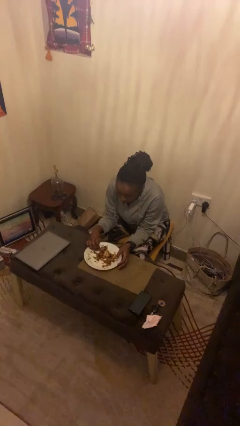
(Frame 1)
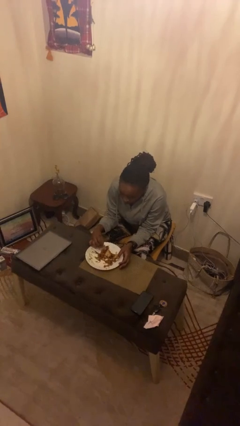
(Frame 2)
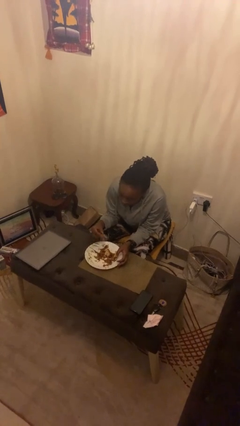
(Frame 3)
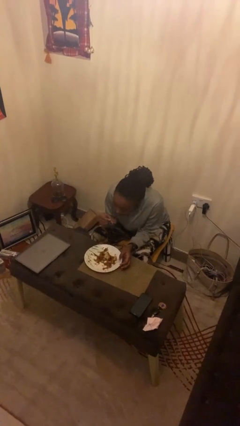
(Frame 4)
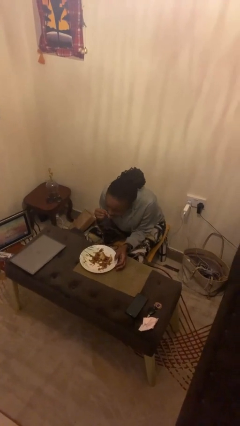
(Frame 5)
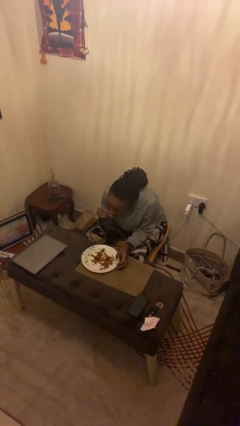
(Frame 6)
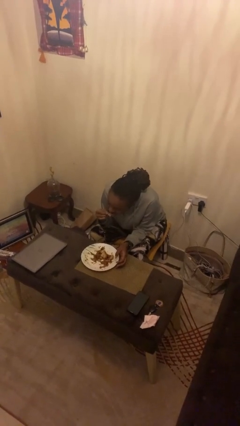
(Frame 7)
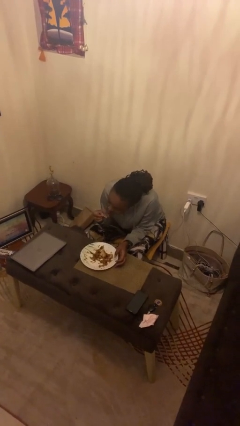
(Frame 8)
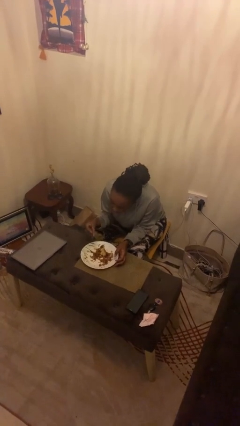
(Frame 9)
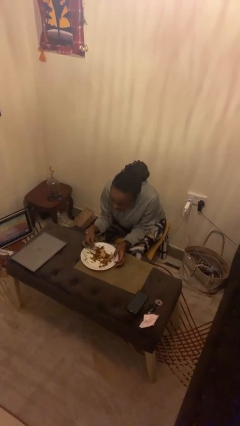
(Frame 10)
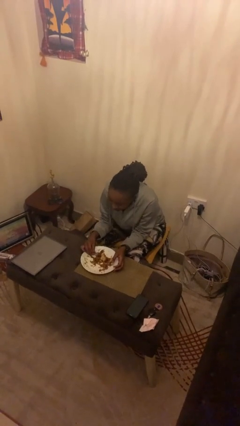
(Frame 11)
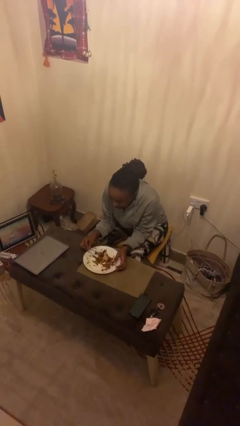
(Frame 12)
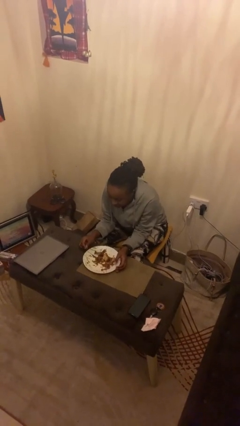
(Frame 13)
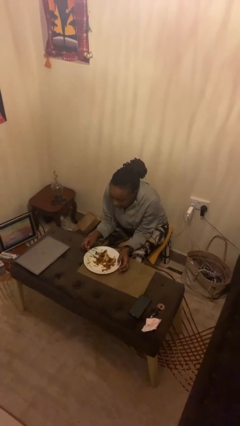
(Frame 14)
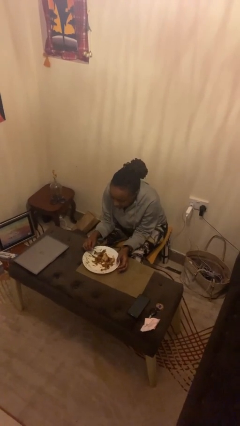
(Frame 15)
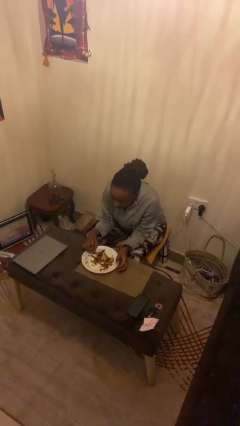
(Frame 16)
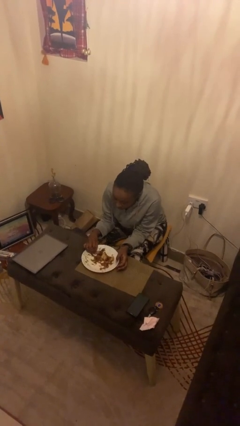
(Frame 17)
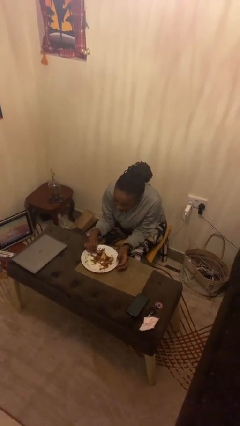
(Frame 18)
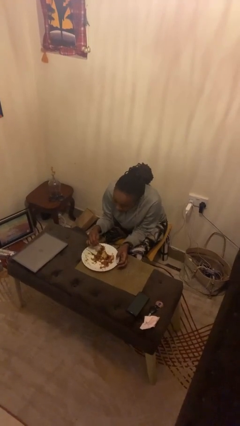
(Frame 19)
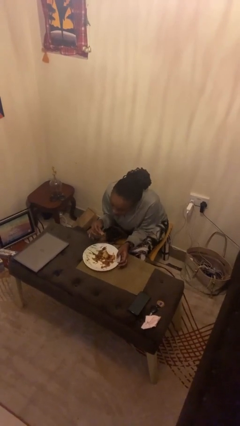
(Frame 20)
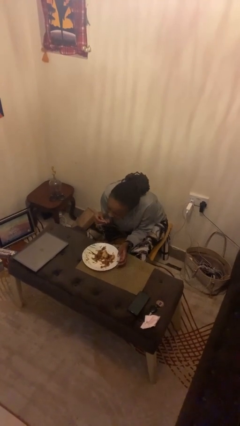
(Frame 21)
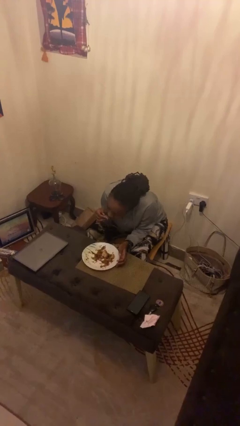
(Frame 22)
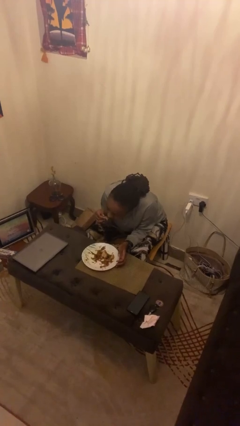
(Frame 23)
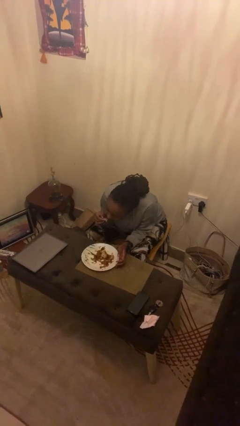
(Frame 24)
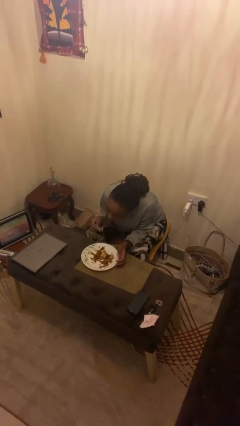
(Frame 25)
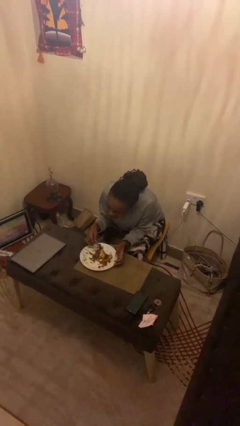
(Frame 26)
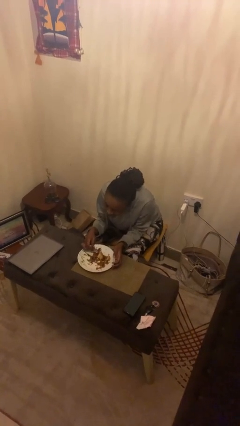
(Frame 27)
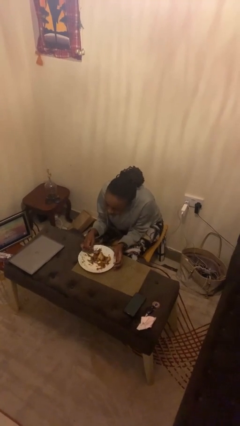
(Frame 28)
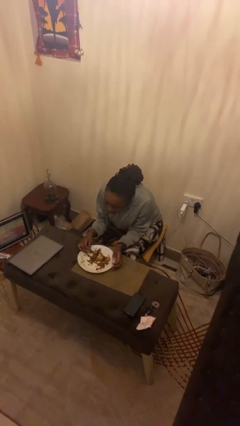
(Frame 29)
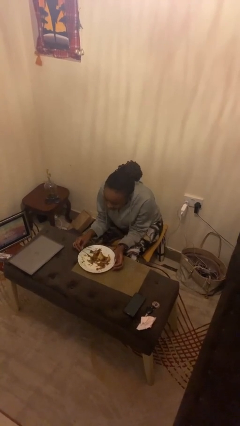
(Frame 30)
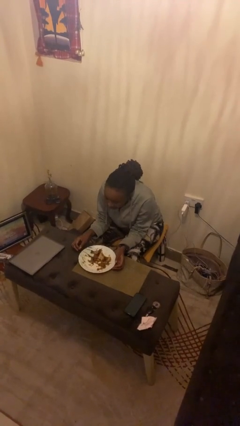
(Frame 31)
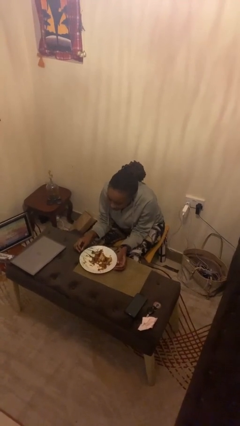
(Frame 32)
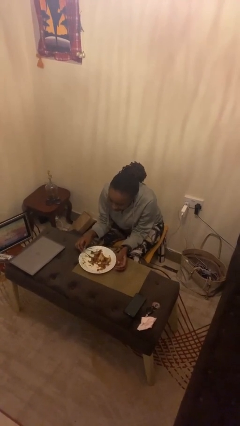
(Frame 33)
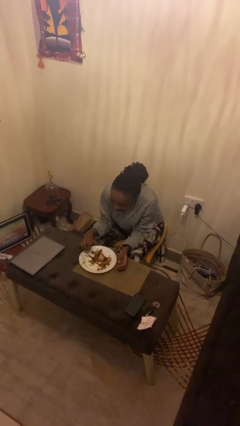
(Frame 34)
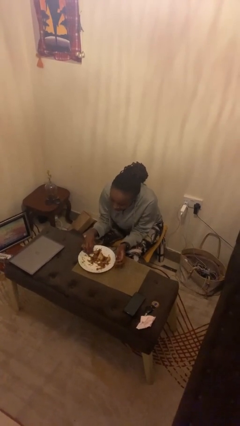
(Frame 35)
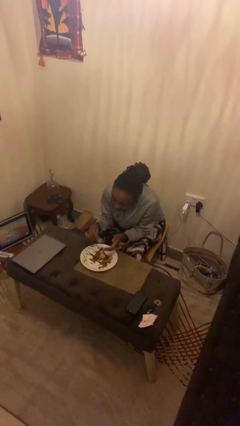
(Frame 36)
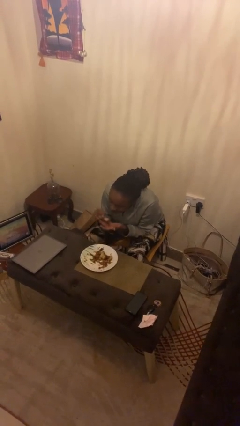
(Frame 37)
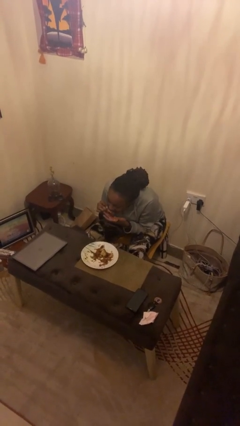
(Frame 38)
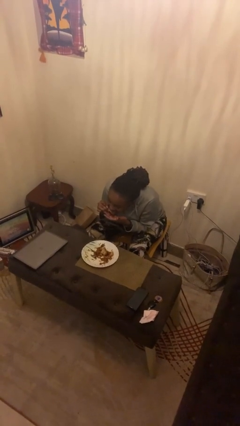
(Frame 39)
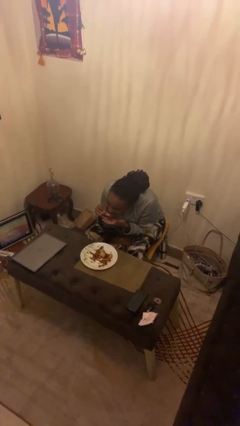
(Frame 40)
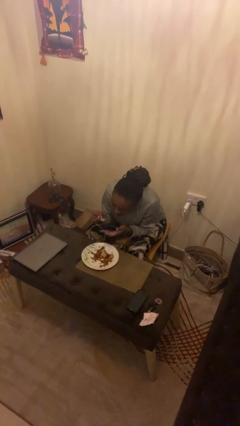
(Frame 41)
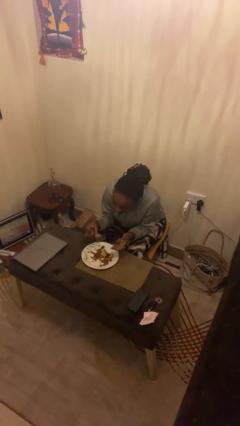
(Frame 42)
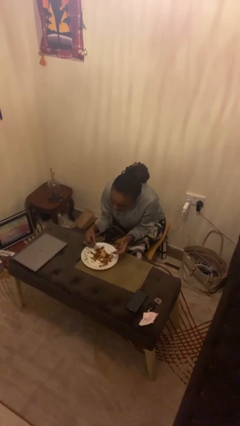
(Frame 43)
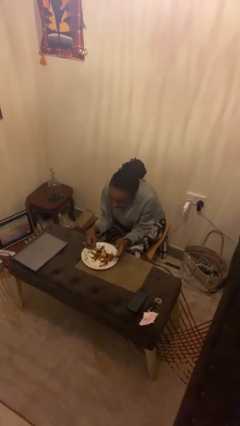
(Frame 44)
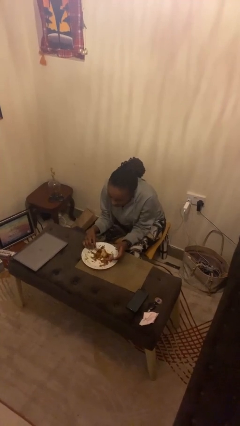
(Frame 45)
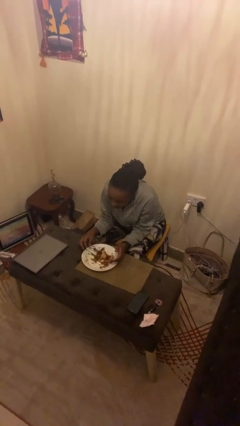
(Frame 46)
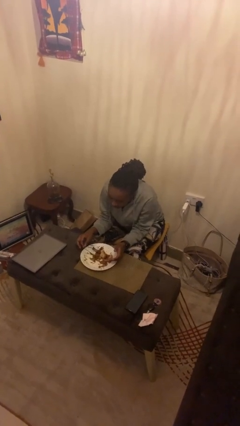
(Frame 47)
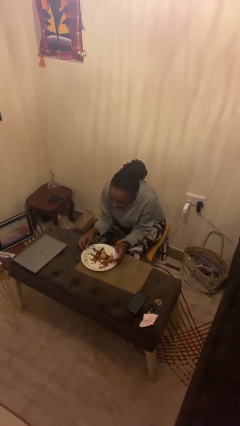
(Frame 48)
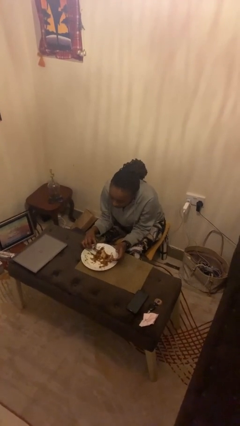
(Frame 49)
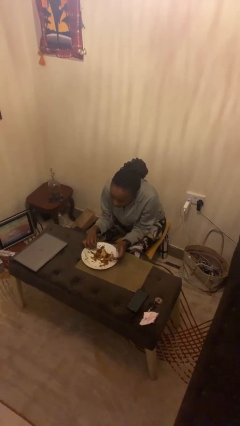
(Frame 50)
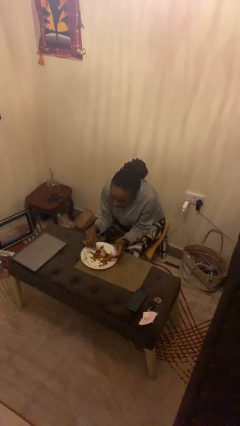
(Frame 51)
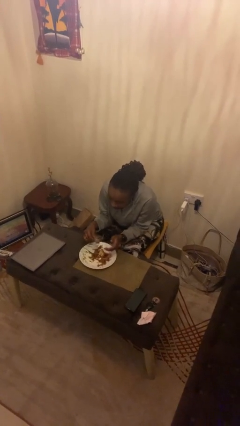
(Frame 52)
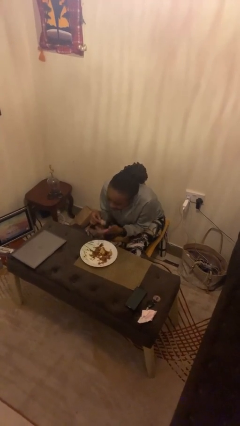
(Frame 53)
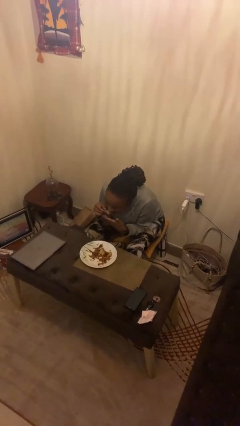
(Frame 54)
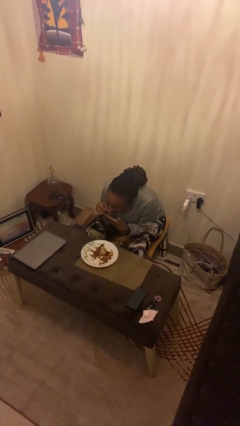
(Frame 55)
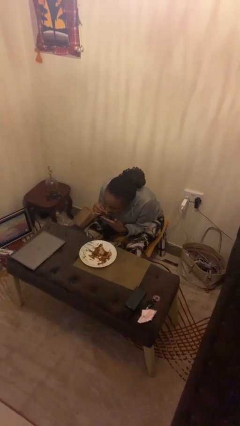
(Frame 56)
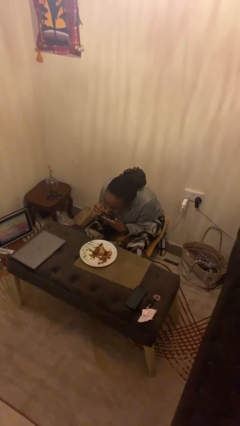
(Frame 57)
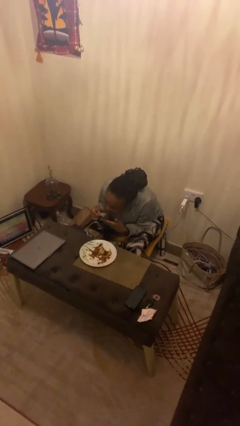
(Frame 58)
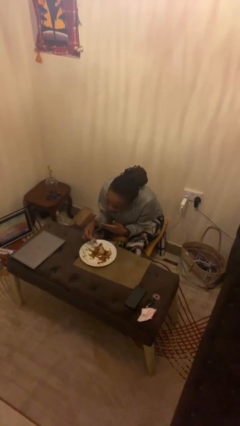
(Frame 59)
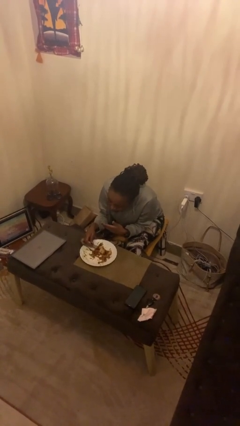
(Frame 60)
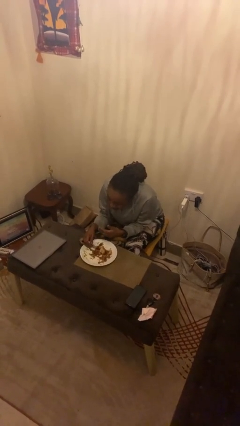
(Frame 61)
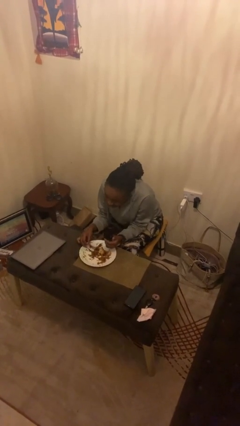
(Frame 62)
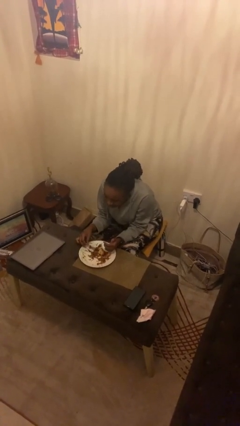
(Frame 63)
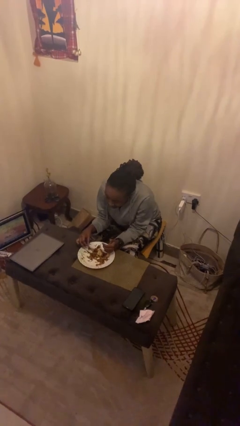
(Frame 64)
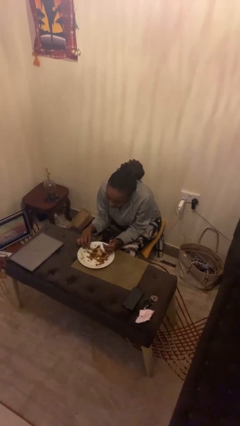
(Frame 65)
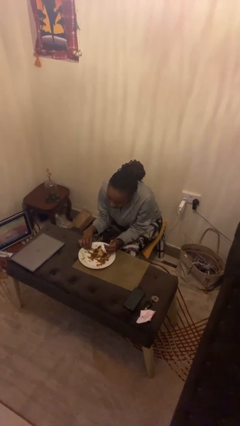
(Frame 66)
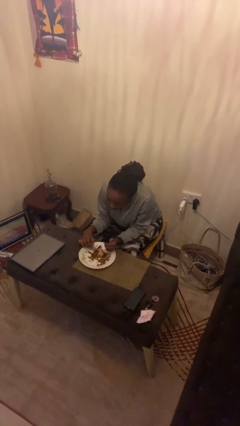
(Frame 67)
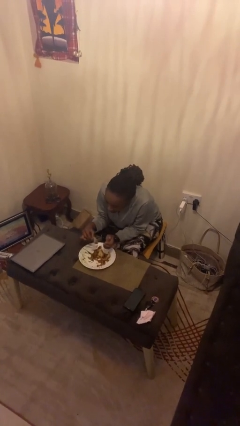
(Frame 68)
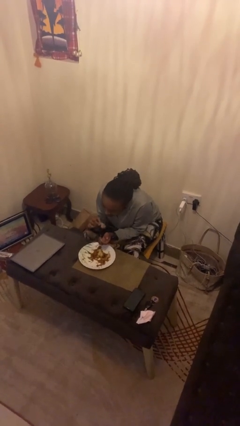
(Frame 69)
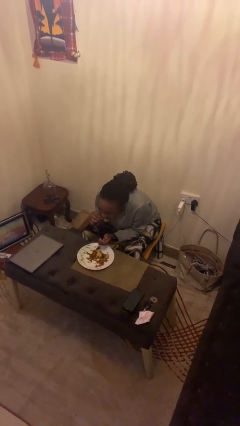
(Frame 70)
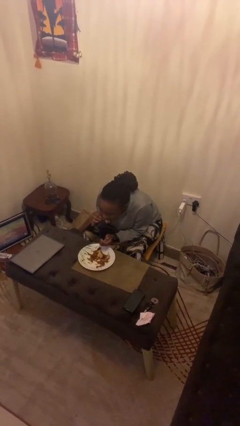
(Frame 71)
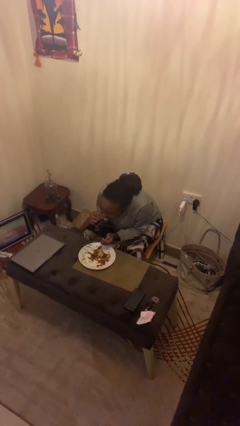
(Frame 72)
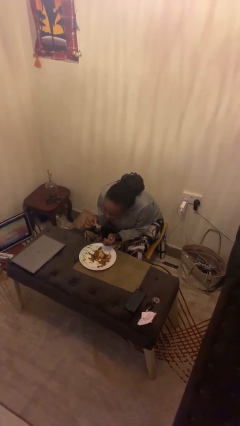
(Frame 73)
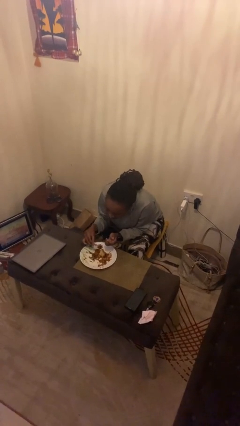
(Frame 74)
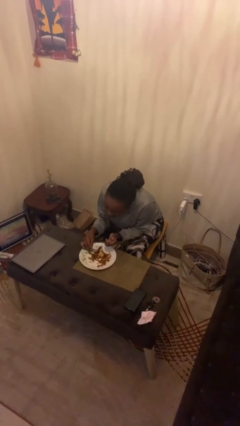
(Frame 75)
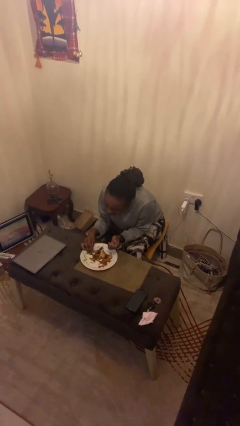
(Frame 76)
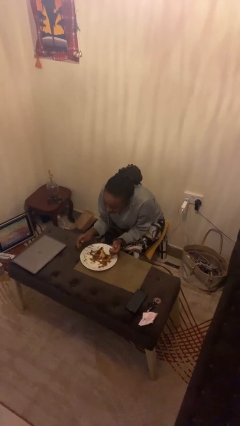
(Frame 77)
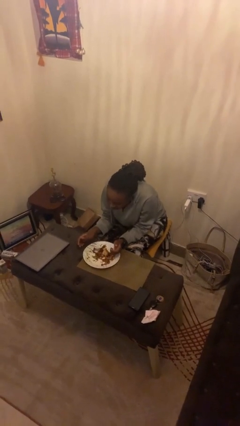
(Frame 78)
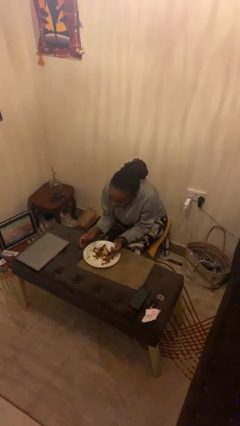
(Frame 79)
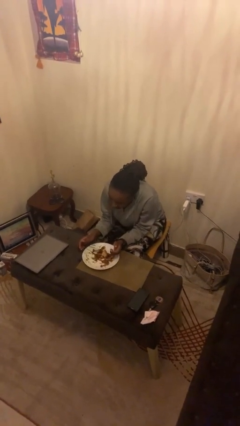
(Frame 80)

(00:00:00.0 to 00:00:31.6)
person eats with hands

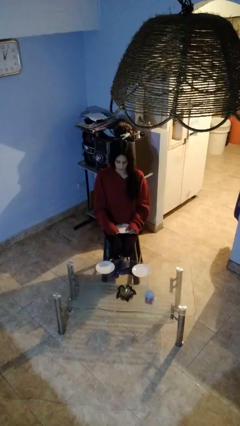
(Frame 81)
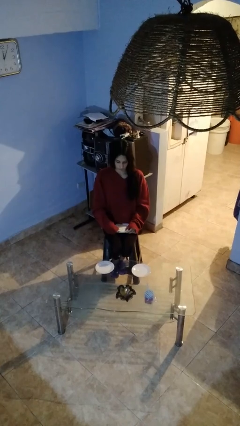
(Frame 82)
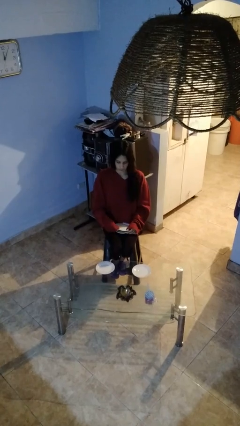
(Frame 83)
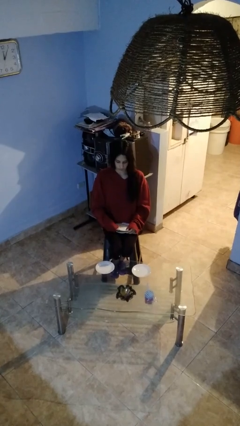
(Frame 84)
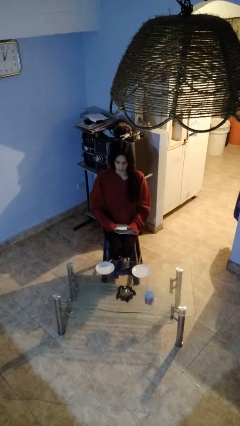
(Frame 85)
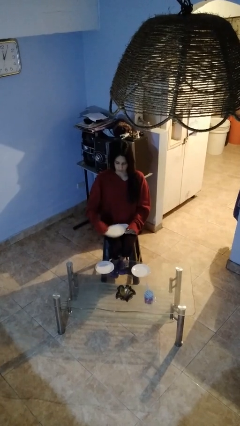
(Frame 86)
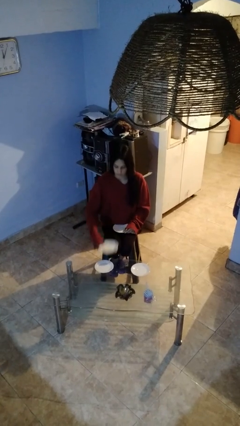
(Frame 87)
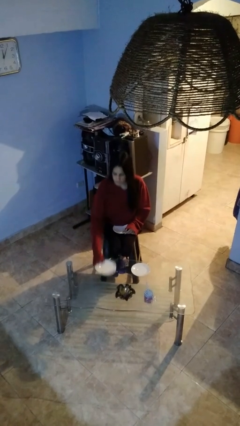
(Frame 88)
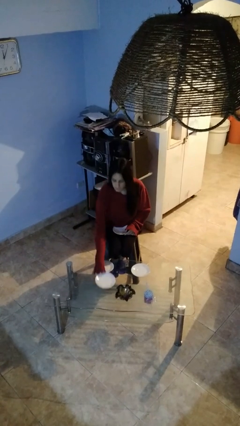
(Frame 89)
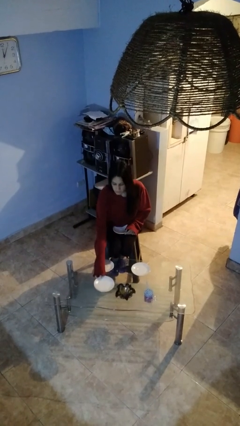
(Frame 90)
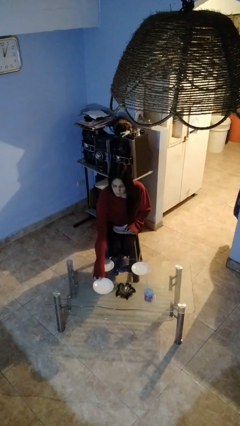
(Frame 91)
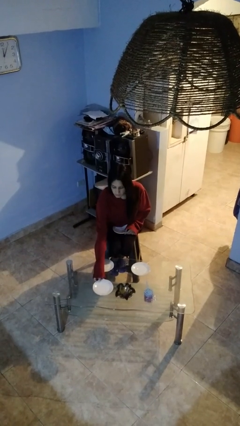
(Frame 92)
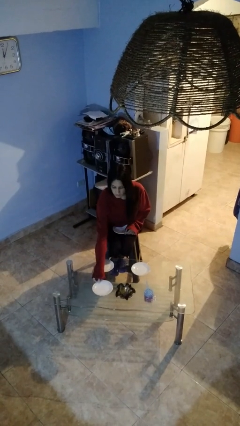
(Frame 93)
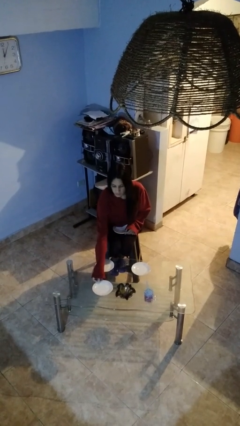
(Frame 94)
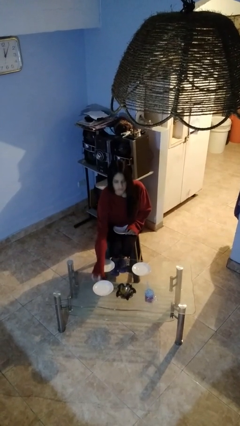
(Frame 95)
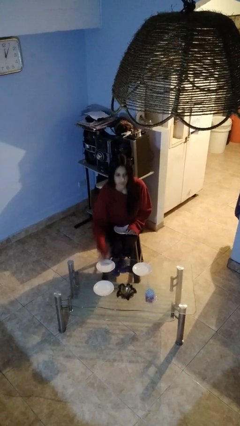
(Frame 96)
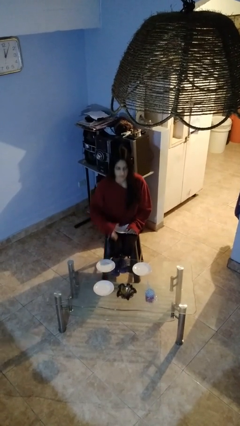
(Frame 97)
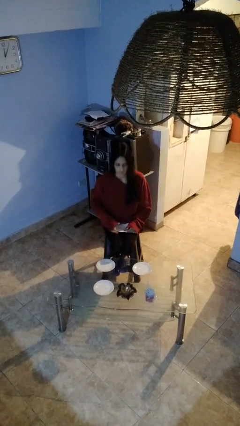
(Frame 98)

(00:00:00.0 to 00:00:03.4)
person sets table
